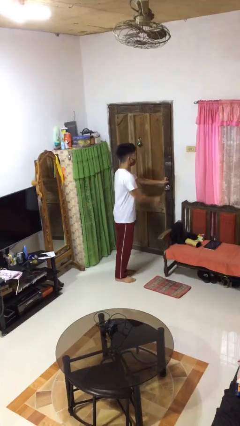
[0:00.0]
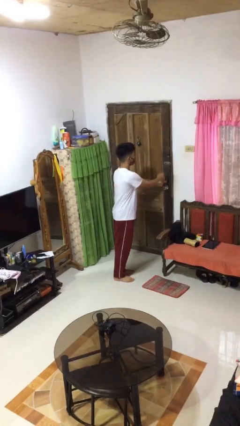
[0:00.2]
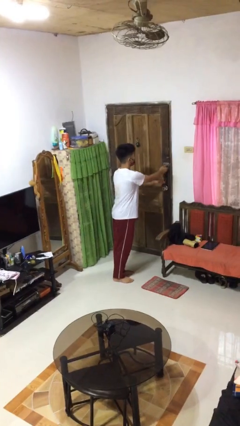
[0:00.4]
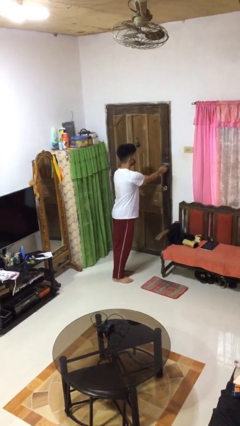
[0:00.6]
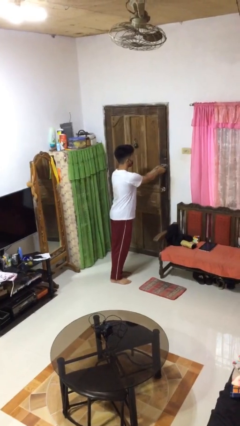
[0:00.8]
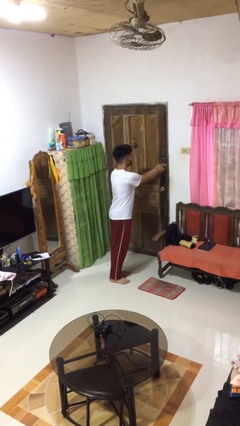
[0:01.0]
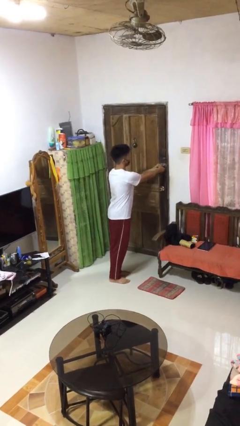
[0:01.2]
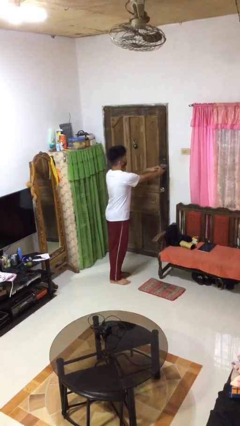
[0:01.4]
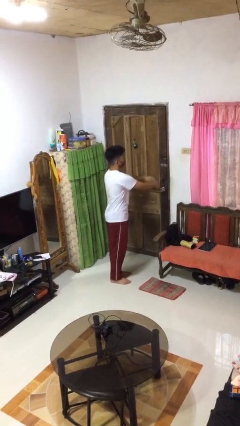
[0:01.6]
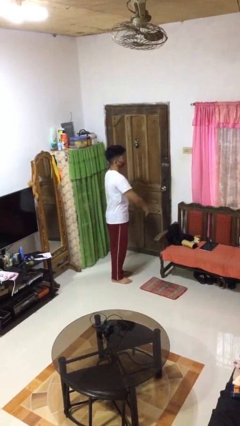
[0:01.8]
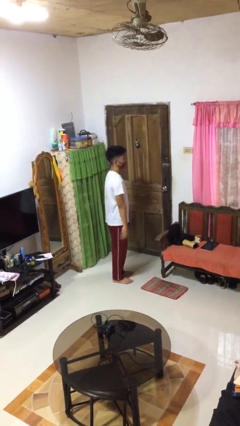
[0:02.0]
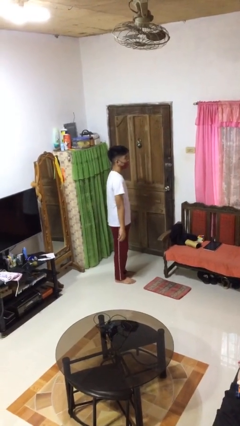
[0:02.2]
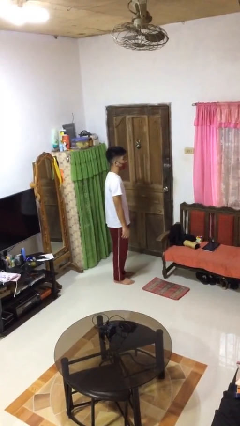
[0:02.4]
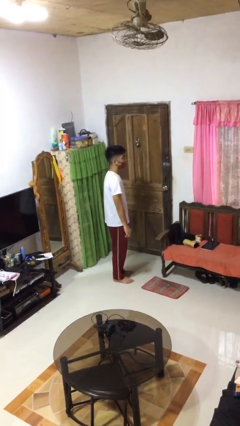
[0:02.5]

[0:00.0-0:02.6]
person locks door with keys

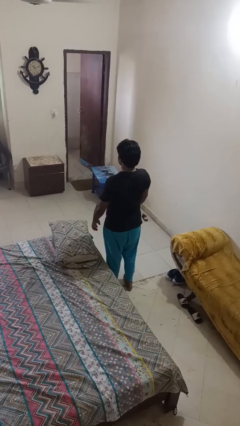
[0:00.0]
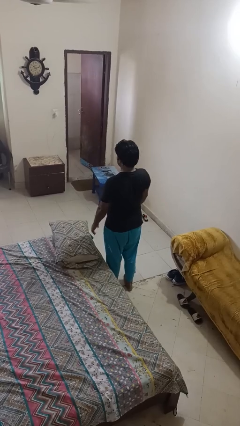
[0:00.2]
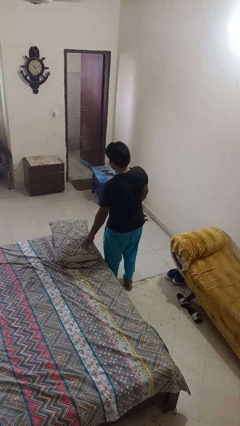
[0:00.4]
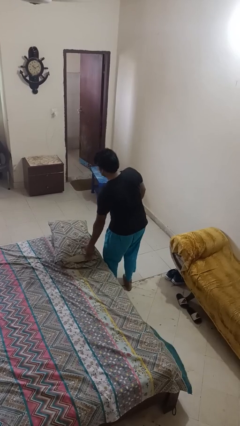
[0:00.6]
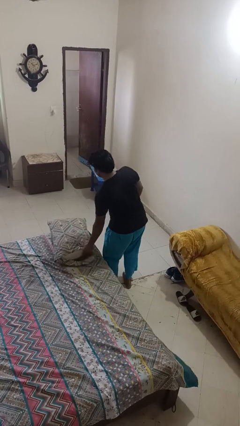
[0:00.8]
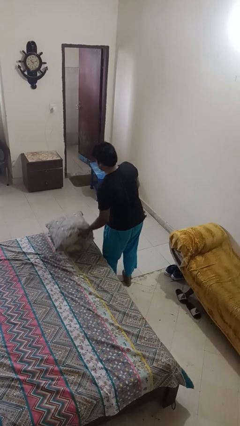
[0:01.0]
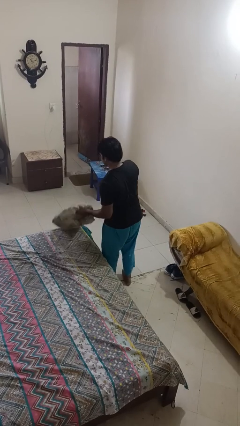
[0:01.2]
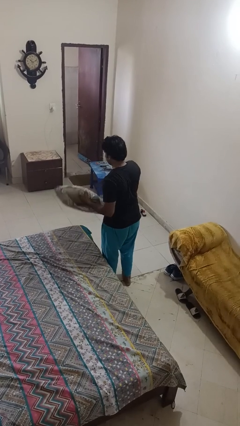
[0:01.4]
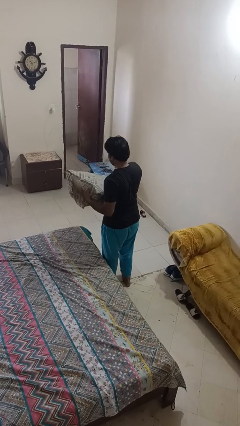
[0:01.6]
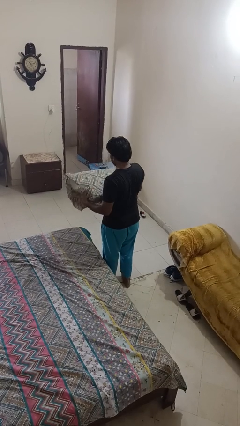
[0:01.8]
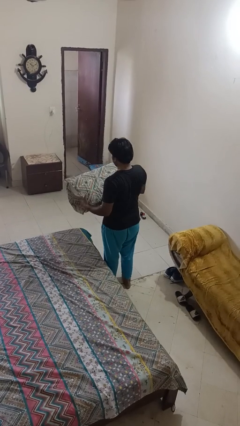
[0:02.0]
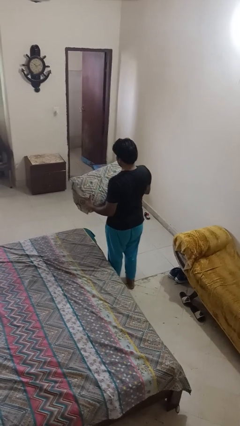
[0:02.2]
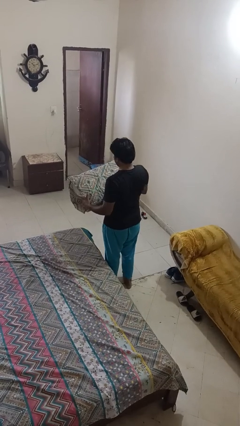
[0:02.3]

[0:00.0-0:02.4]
person picks up object from bed

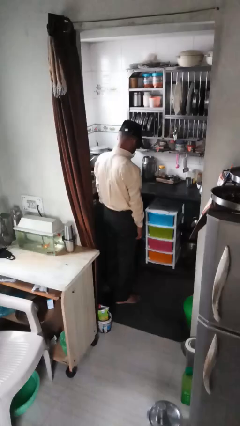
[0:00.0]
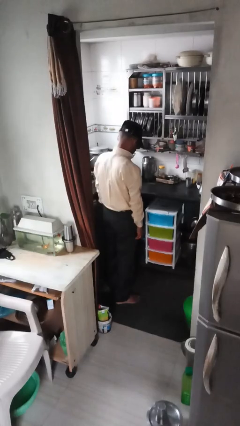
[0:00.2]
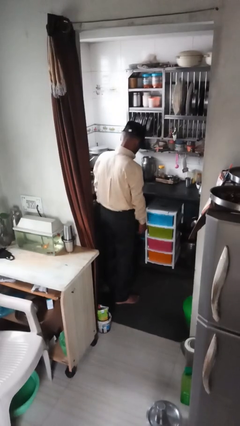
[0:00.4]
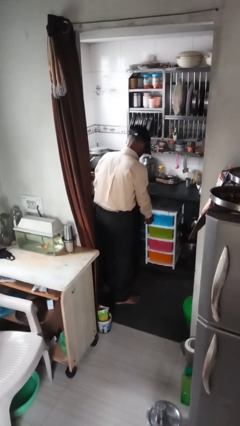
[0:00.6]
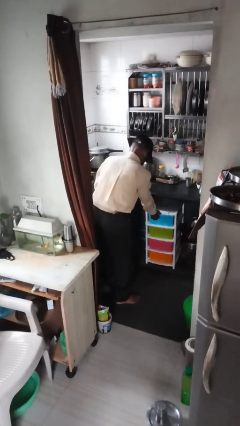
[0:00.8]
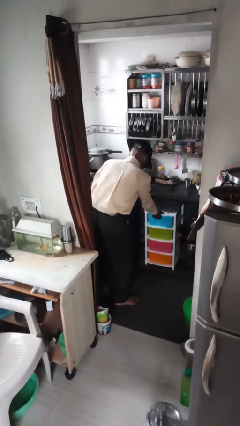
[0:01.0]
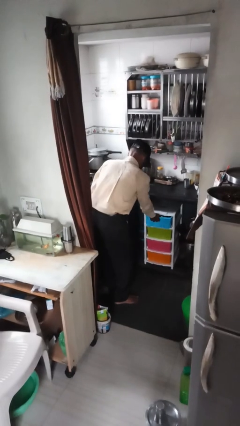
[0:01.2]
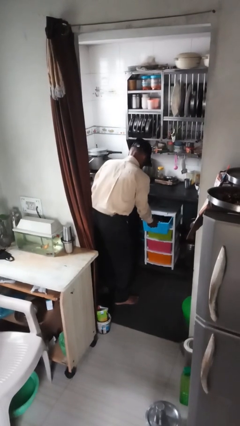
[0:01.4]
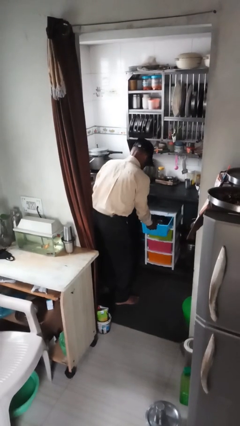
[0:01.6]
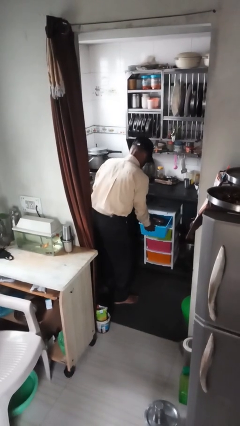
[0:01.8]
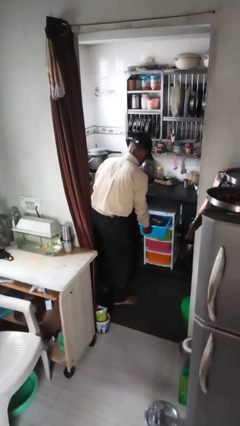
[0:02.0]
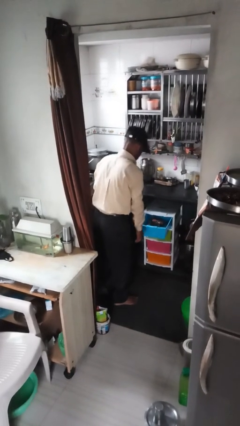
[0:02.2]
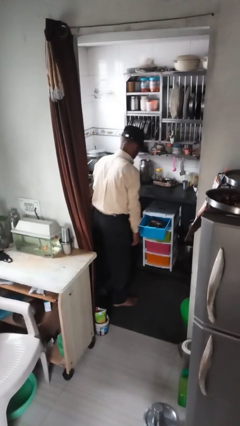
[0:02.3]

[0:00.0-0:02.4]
person opens kitchen drawer

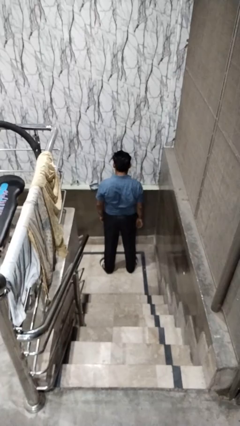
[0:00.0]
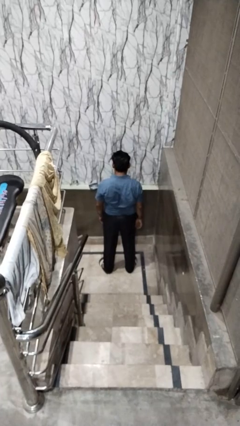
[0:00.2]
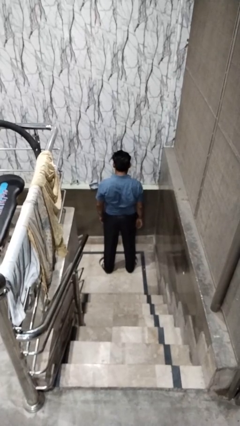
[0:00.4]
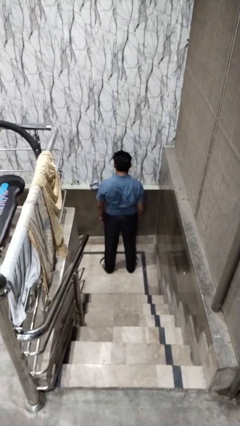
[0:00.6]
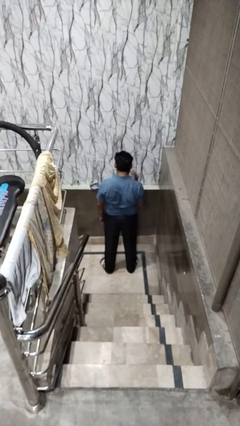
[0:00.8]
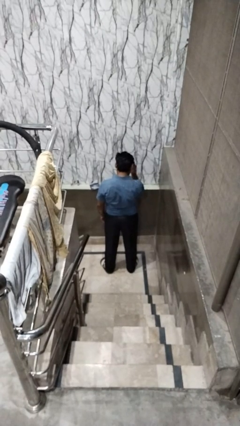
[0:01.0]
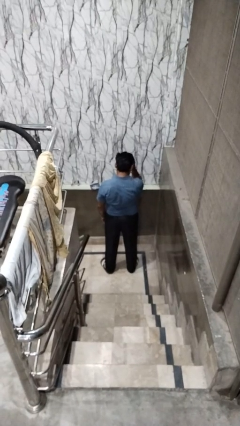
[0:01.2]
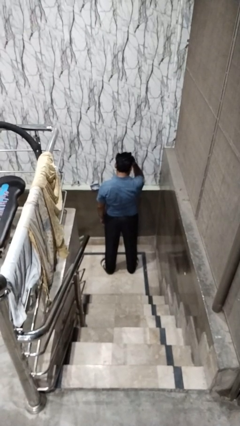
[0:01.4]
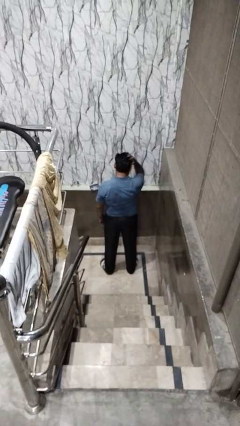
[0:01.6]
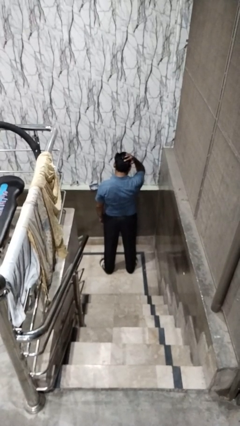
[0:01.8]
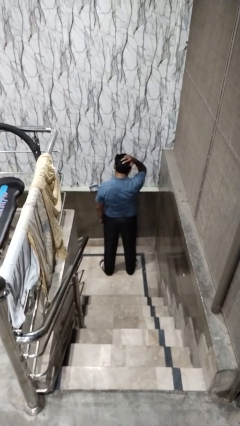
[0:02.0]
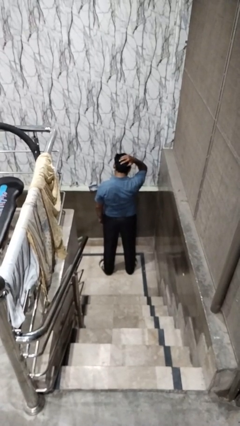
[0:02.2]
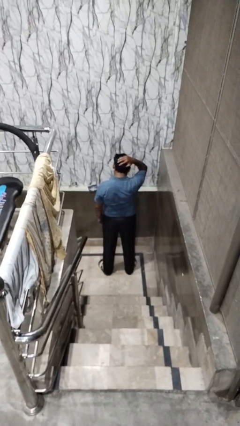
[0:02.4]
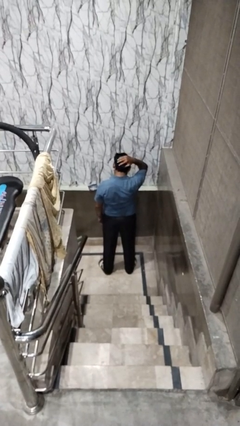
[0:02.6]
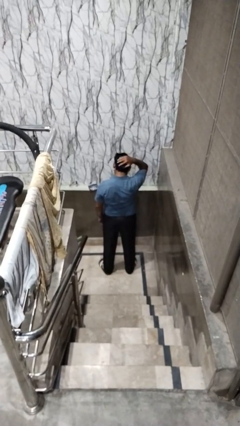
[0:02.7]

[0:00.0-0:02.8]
person strokes hair

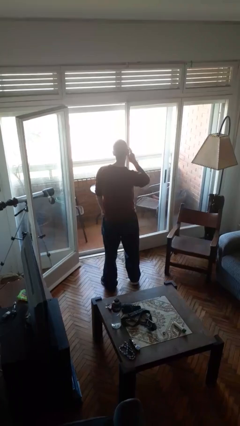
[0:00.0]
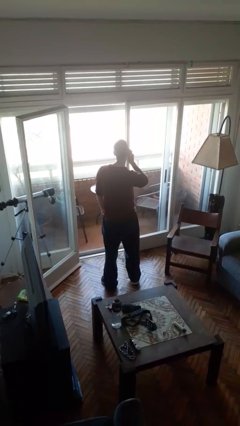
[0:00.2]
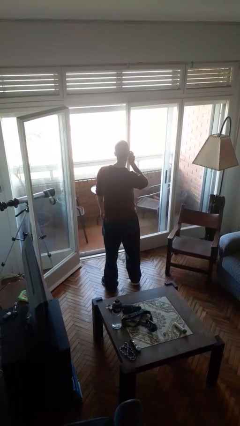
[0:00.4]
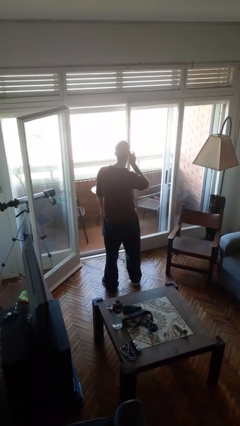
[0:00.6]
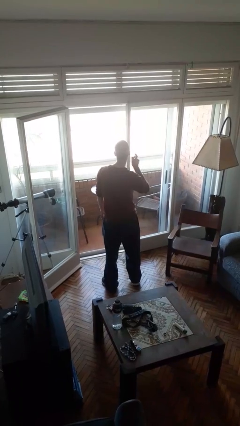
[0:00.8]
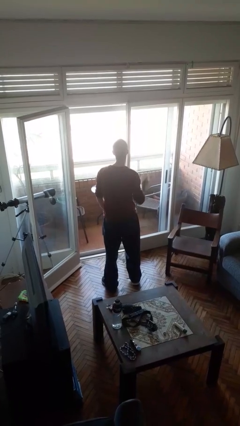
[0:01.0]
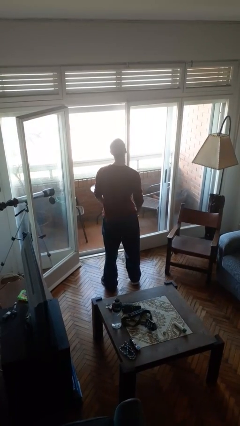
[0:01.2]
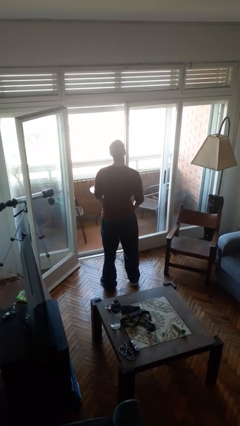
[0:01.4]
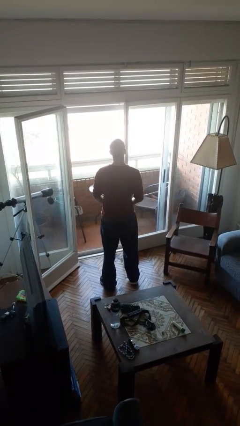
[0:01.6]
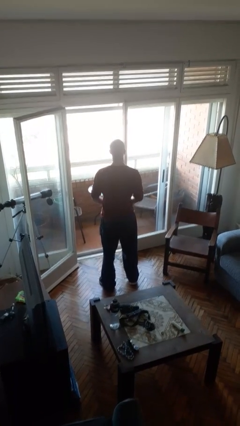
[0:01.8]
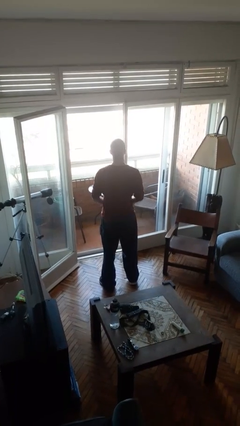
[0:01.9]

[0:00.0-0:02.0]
person takes off earrings

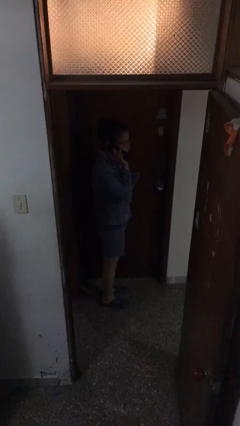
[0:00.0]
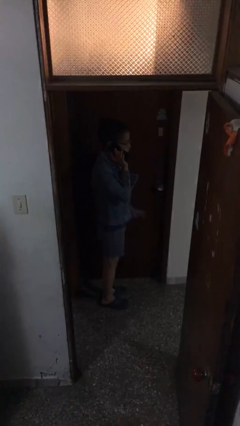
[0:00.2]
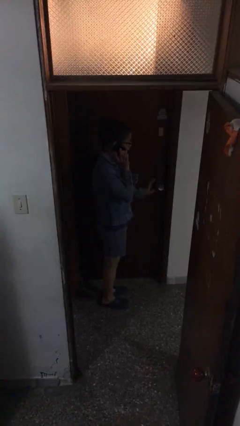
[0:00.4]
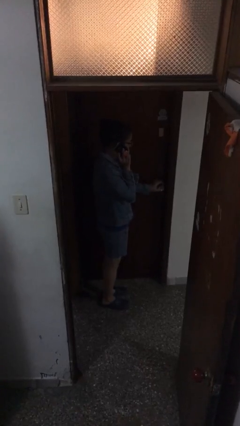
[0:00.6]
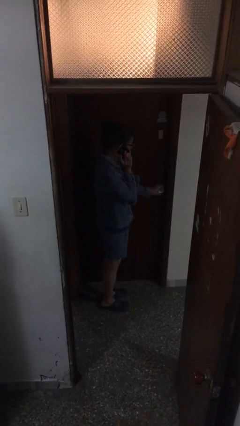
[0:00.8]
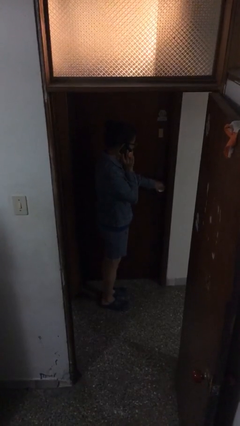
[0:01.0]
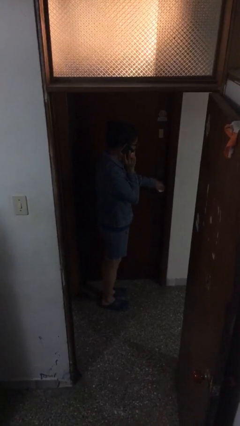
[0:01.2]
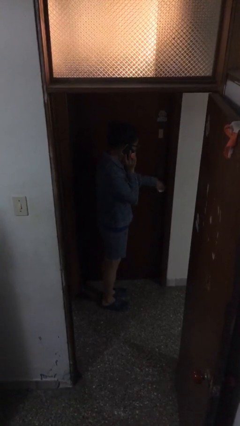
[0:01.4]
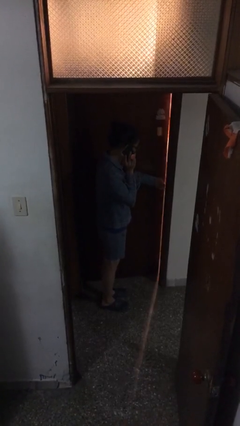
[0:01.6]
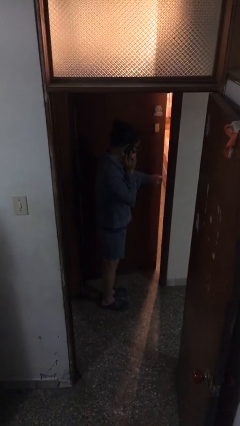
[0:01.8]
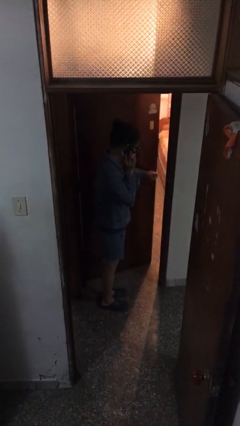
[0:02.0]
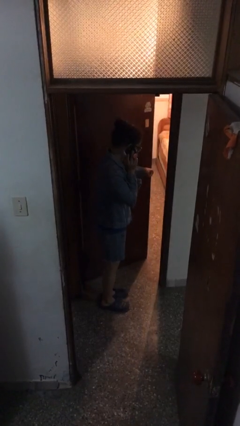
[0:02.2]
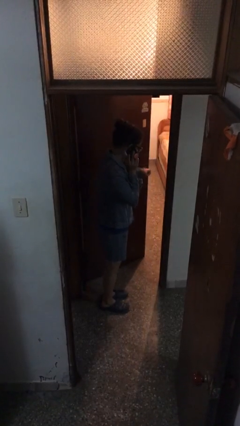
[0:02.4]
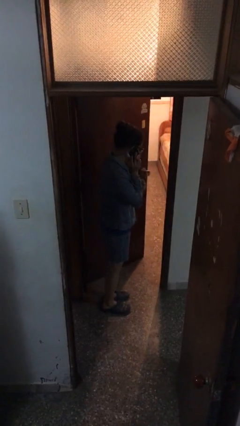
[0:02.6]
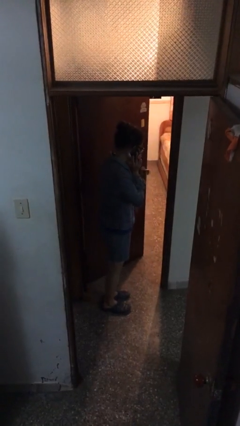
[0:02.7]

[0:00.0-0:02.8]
person opens facility door

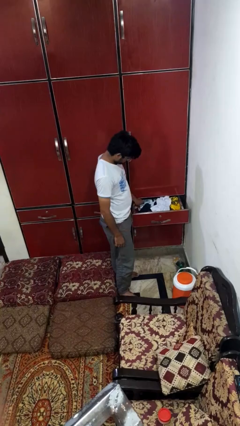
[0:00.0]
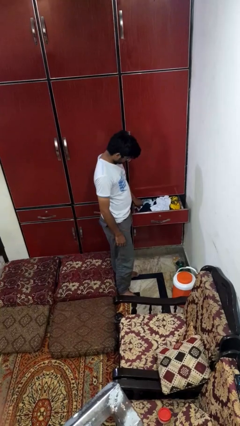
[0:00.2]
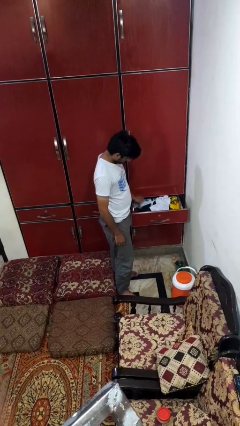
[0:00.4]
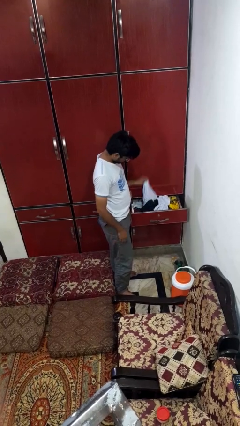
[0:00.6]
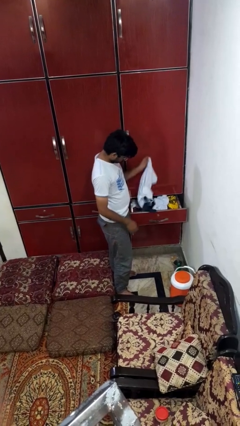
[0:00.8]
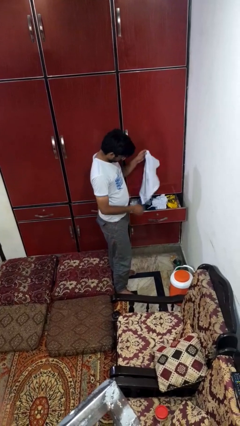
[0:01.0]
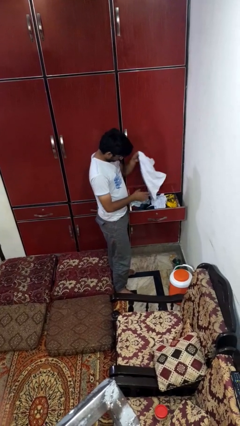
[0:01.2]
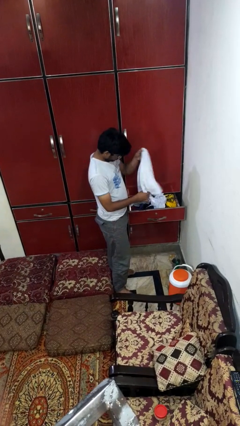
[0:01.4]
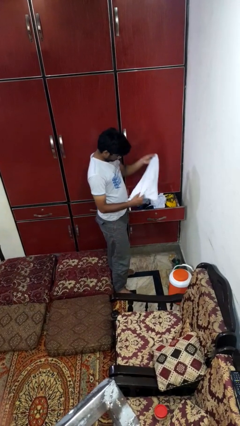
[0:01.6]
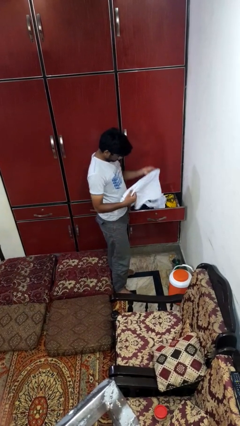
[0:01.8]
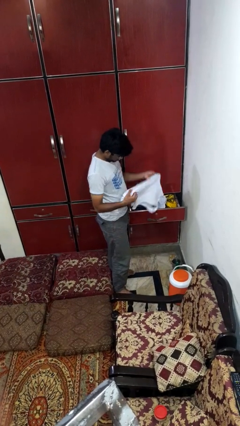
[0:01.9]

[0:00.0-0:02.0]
person takes clothes from dresser

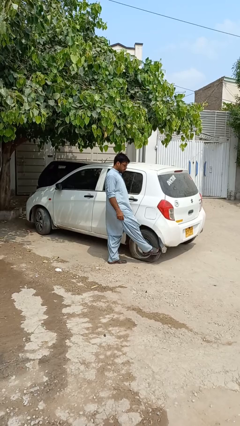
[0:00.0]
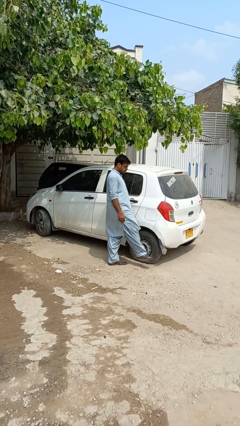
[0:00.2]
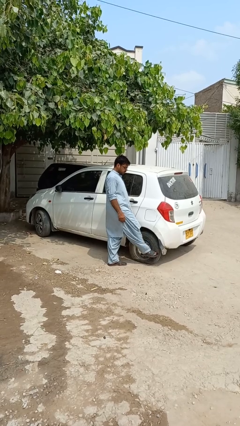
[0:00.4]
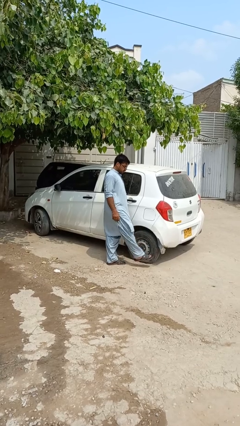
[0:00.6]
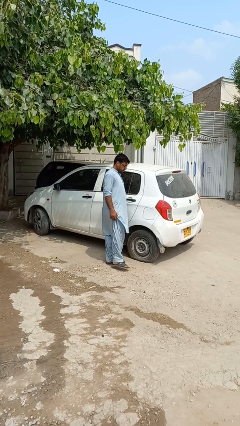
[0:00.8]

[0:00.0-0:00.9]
person kicks car tires
